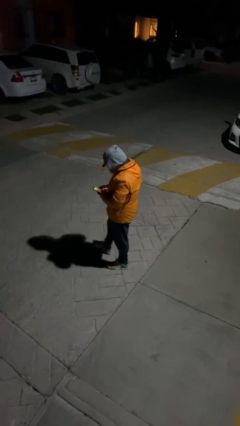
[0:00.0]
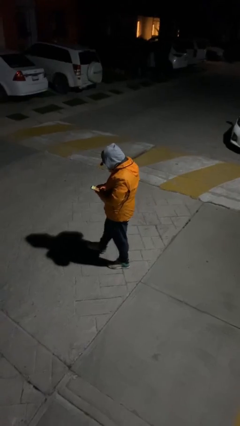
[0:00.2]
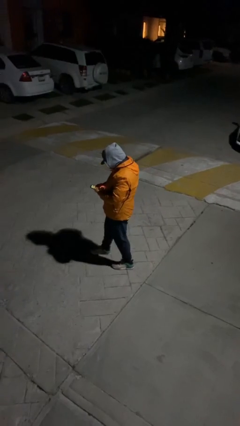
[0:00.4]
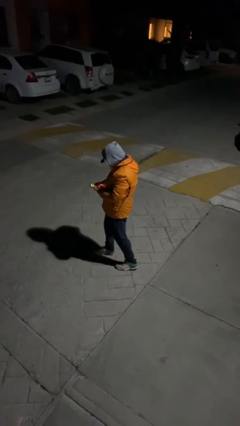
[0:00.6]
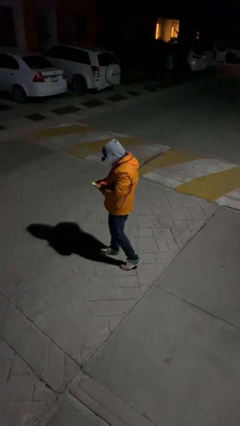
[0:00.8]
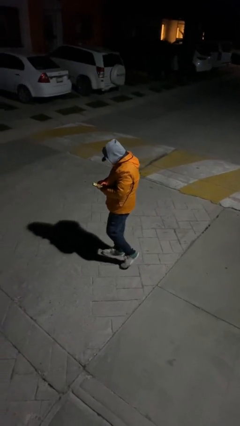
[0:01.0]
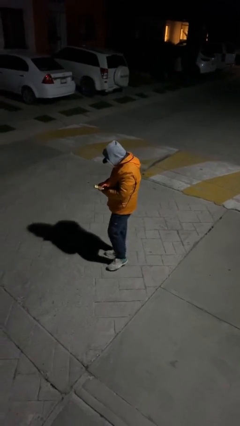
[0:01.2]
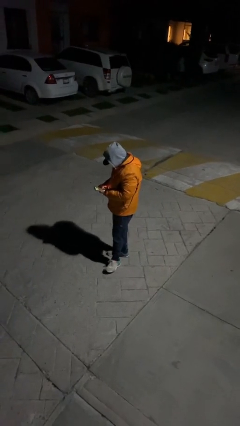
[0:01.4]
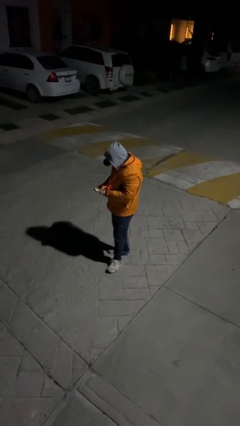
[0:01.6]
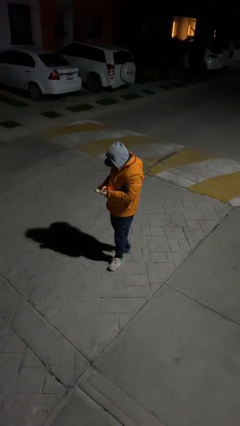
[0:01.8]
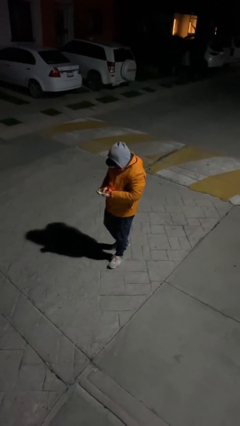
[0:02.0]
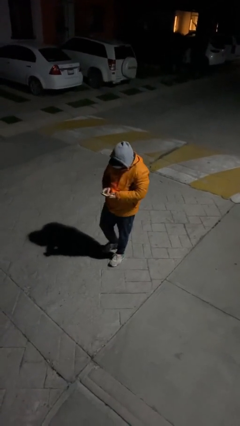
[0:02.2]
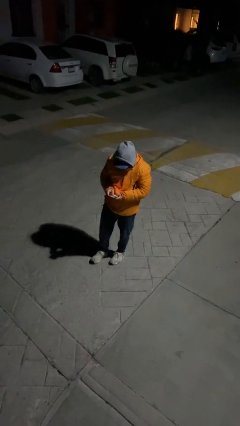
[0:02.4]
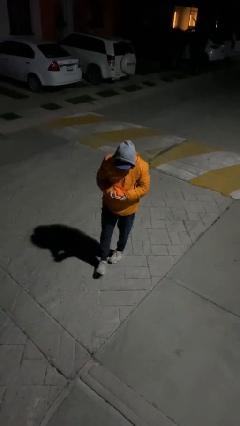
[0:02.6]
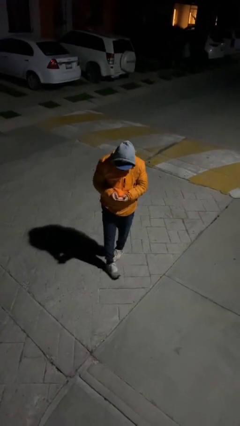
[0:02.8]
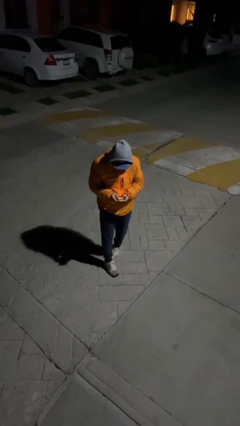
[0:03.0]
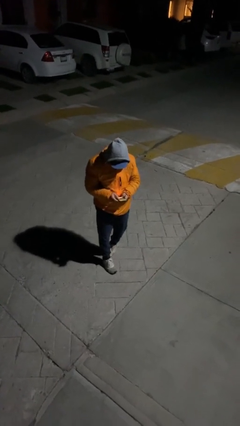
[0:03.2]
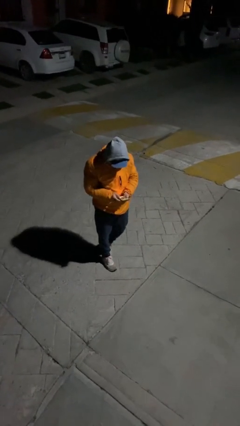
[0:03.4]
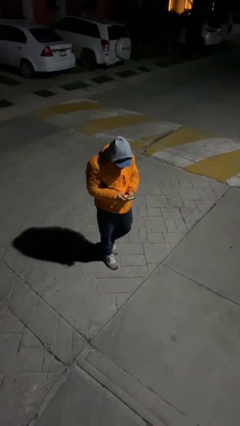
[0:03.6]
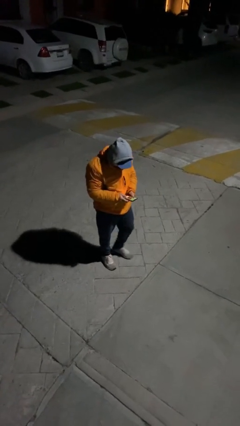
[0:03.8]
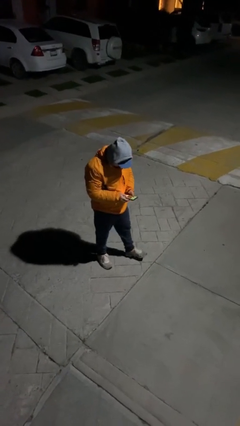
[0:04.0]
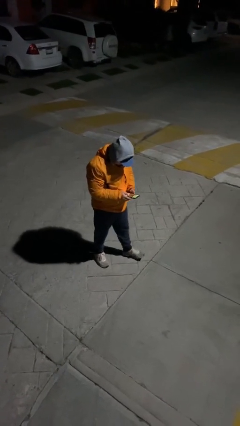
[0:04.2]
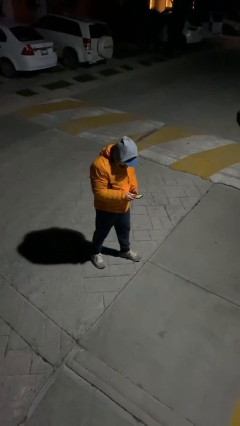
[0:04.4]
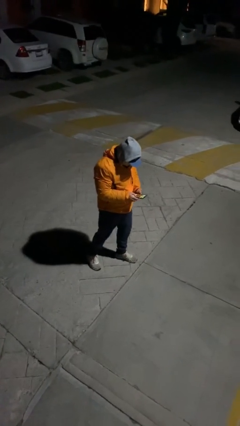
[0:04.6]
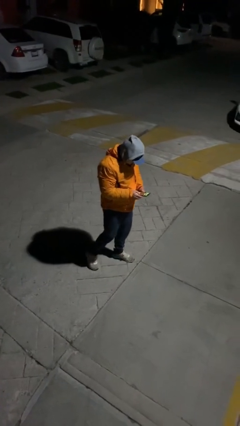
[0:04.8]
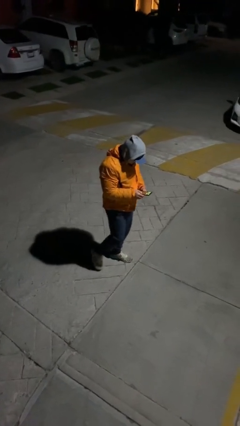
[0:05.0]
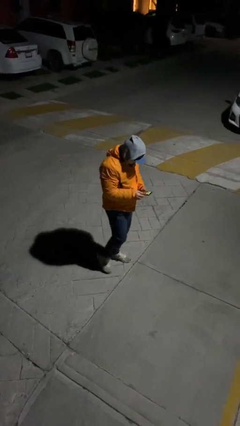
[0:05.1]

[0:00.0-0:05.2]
person texts on phone

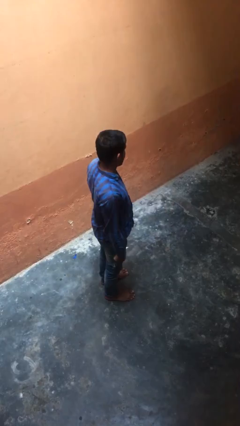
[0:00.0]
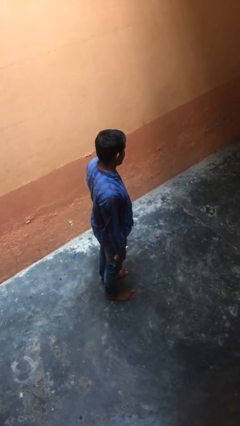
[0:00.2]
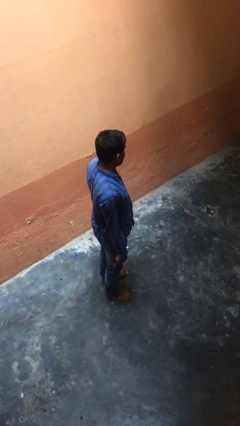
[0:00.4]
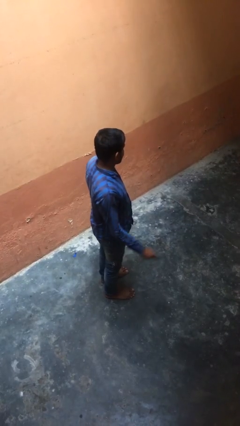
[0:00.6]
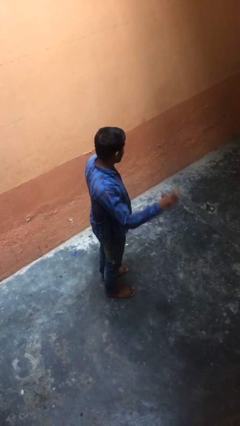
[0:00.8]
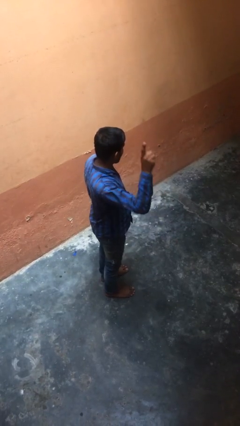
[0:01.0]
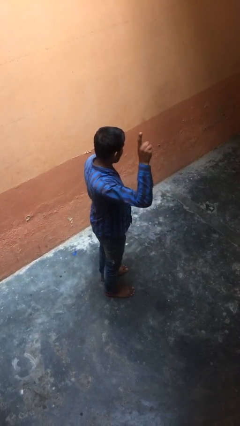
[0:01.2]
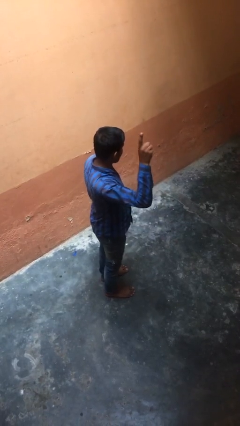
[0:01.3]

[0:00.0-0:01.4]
person gestures number one

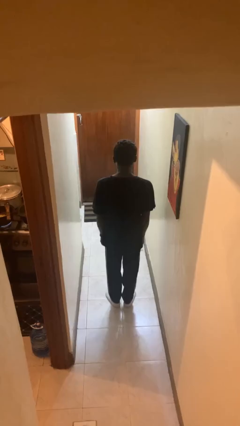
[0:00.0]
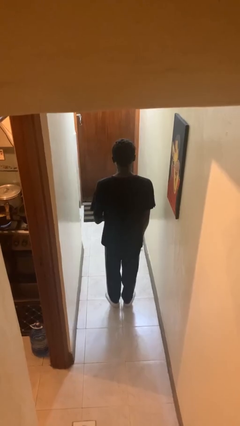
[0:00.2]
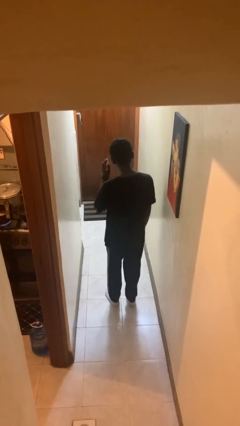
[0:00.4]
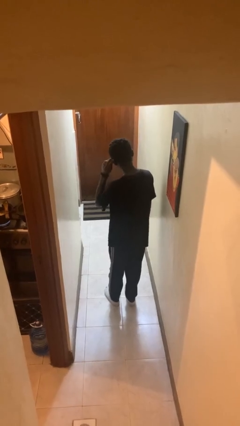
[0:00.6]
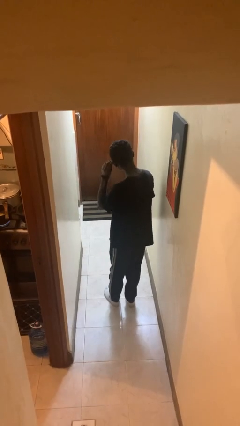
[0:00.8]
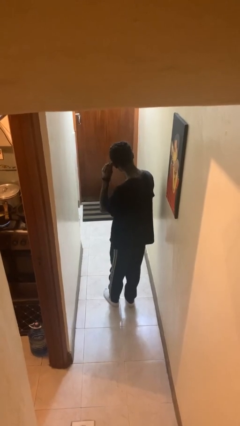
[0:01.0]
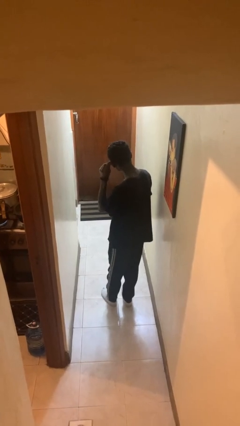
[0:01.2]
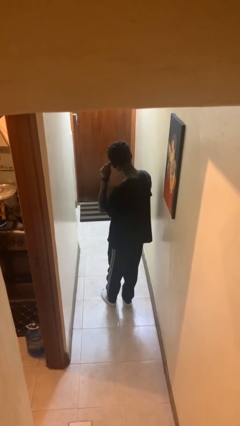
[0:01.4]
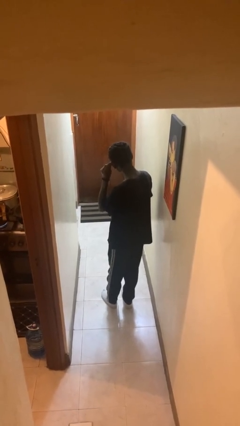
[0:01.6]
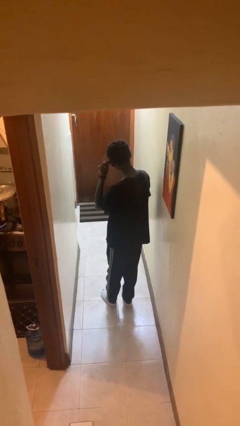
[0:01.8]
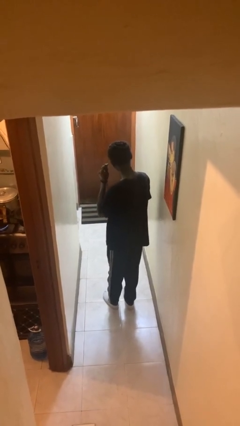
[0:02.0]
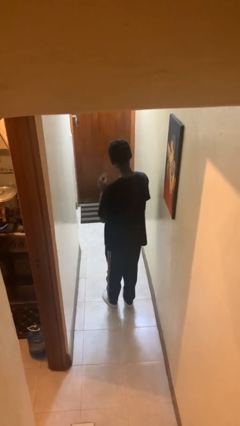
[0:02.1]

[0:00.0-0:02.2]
person touches earlobe

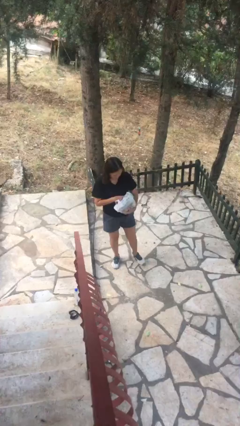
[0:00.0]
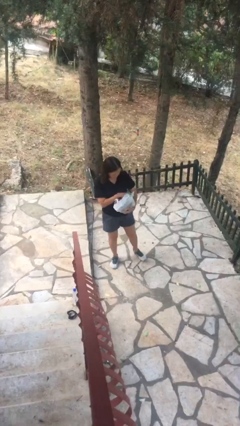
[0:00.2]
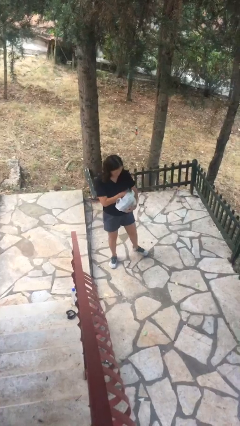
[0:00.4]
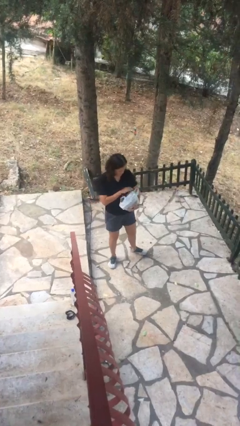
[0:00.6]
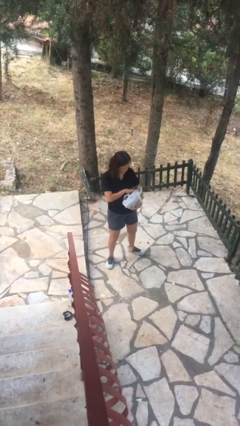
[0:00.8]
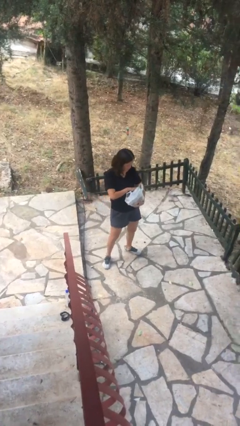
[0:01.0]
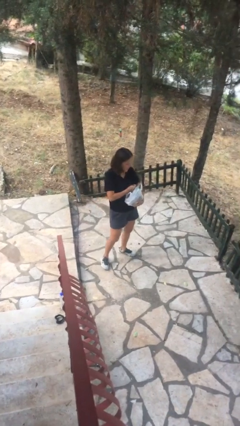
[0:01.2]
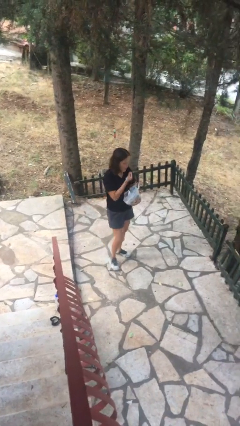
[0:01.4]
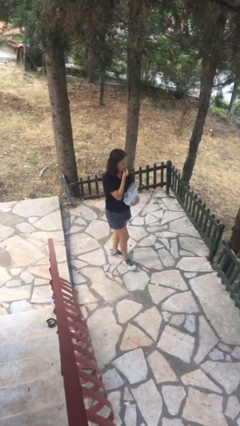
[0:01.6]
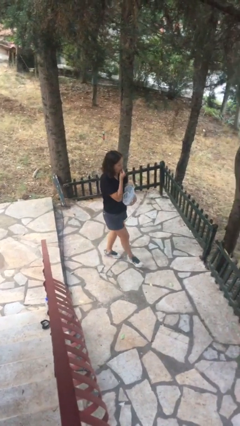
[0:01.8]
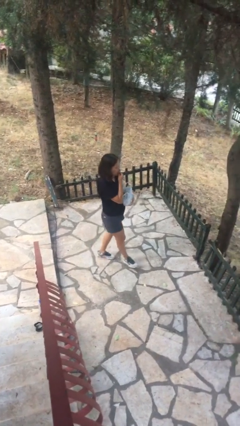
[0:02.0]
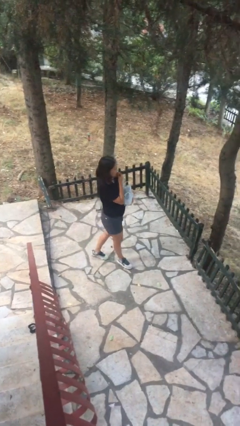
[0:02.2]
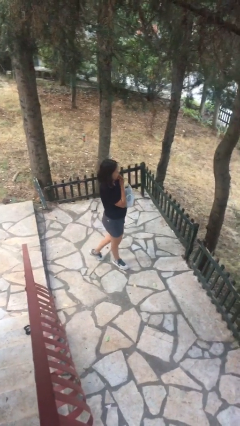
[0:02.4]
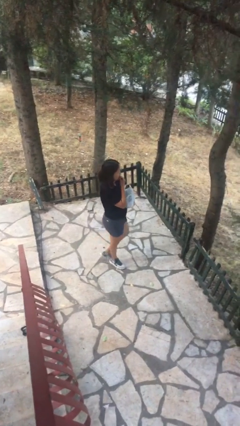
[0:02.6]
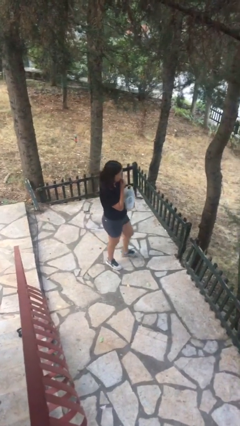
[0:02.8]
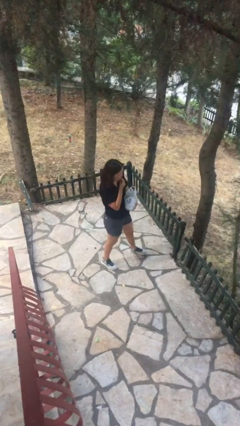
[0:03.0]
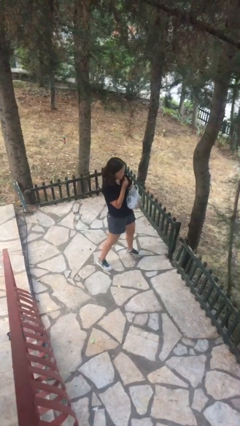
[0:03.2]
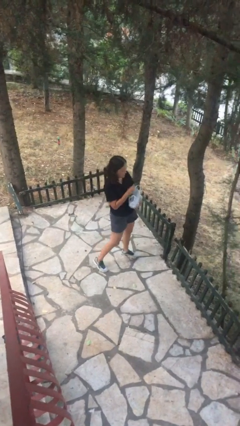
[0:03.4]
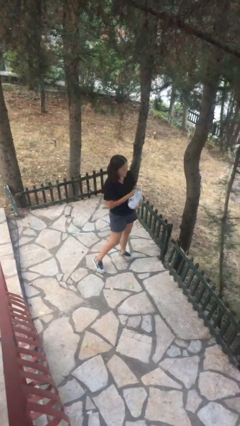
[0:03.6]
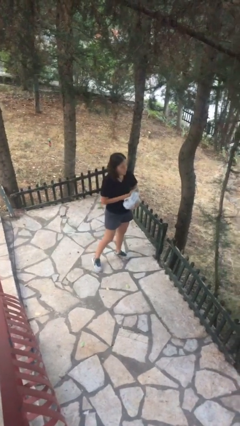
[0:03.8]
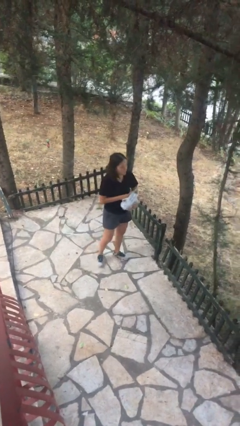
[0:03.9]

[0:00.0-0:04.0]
person eats snack from bag

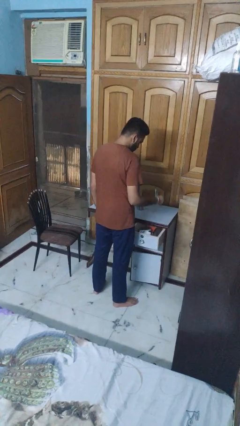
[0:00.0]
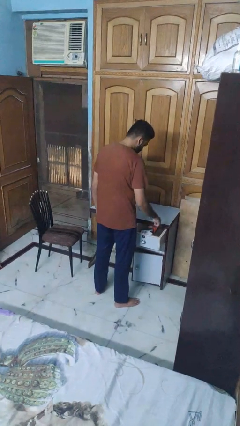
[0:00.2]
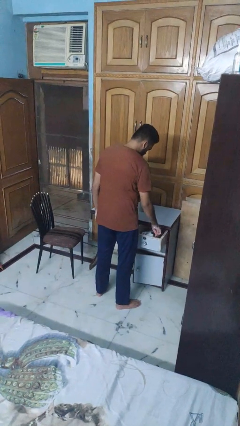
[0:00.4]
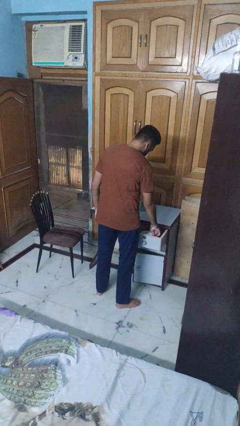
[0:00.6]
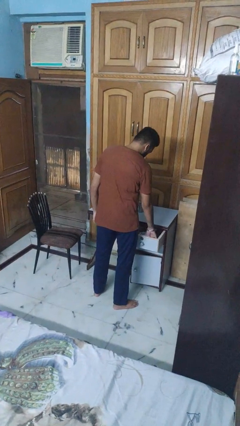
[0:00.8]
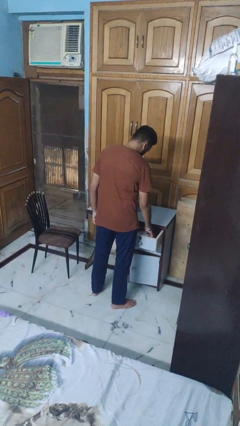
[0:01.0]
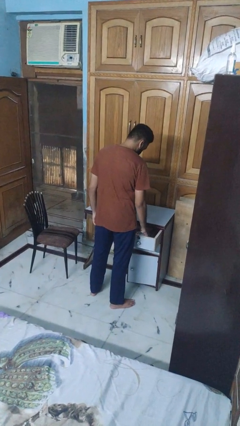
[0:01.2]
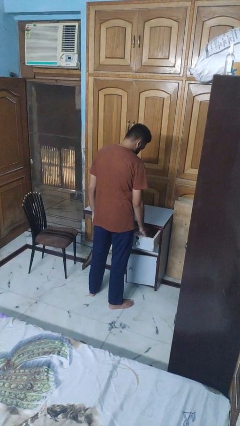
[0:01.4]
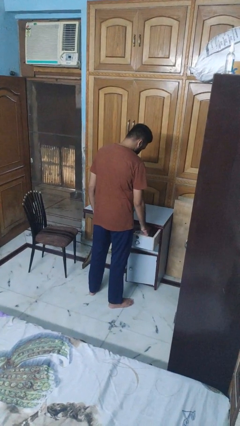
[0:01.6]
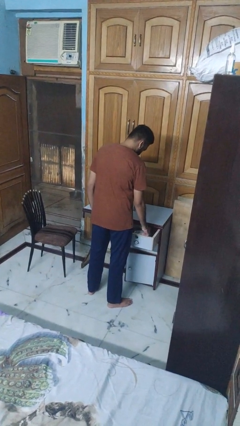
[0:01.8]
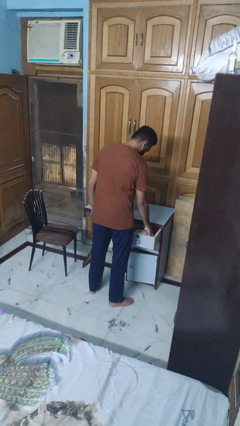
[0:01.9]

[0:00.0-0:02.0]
person puts object into kitchen drawer

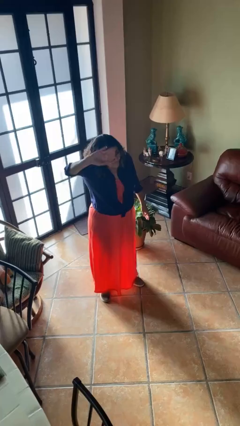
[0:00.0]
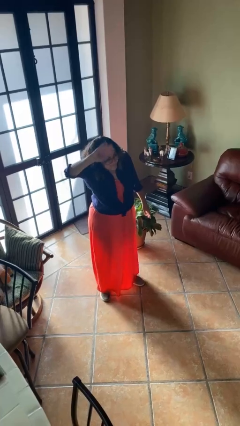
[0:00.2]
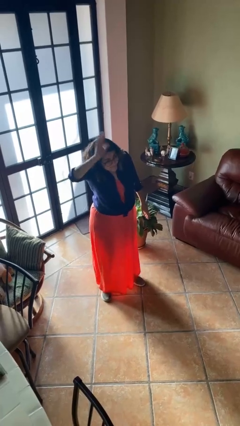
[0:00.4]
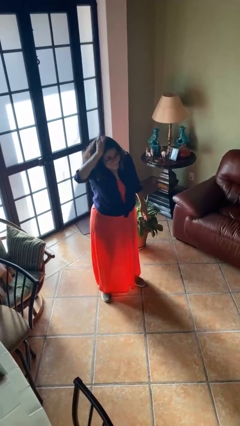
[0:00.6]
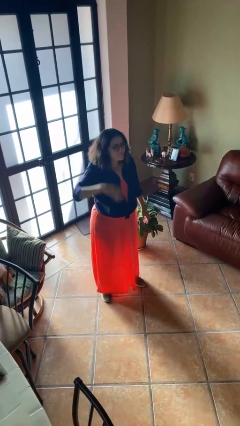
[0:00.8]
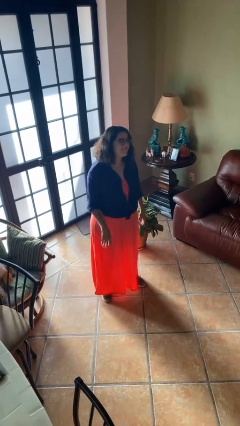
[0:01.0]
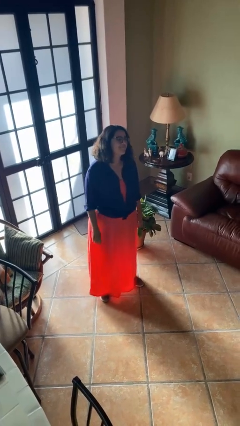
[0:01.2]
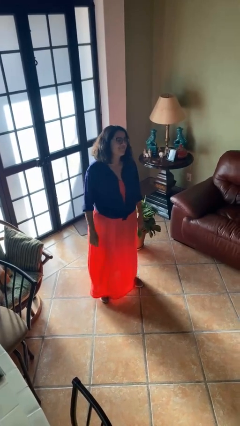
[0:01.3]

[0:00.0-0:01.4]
person waves at person

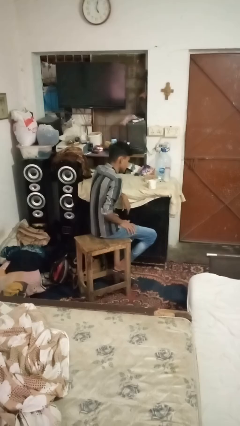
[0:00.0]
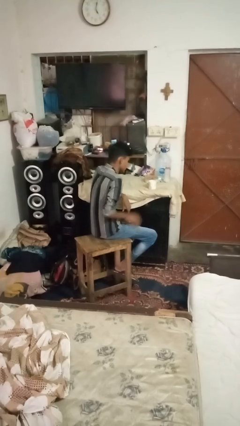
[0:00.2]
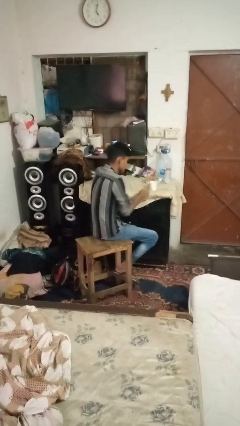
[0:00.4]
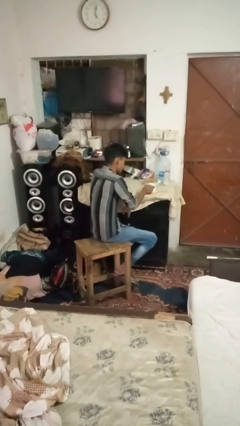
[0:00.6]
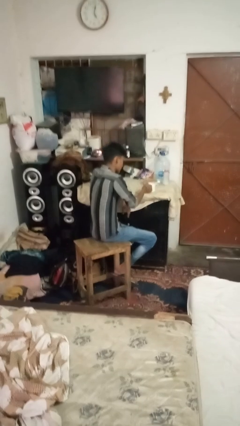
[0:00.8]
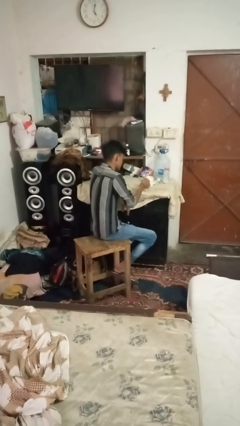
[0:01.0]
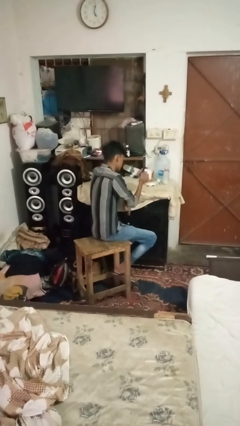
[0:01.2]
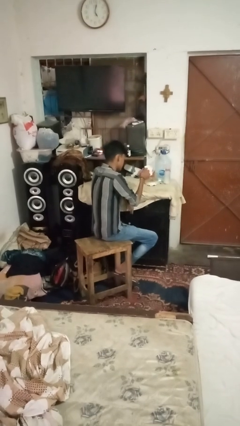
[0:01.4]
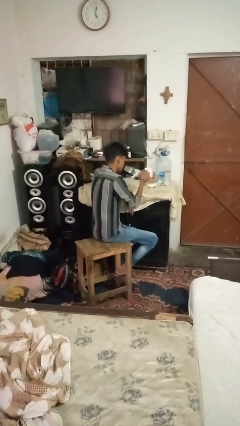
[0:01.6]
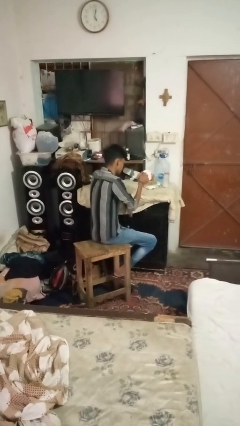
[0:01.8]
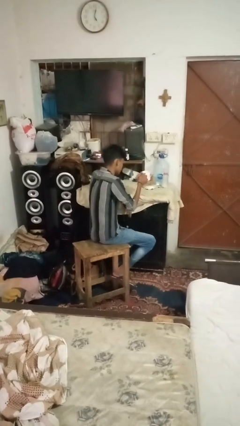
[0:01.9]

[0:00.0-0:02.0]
person picks up object from table
